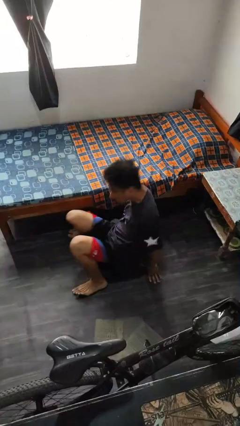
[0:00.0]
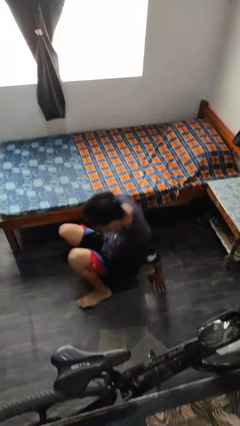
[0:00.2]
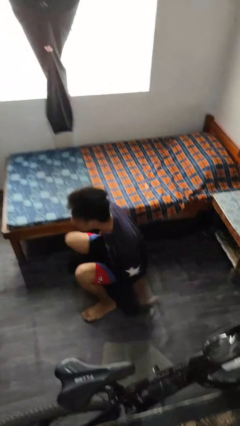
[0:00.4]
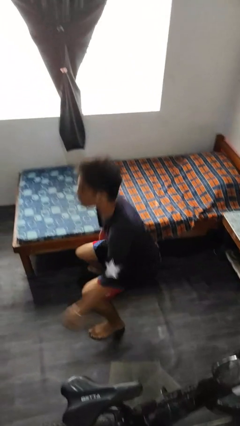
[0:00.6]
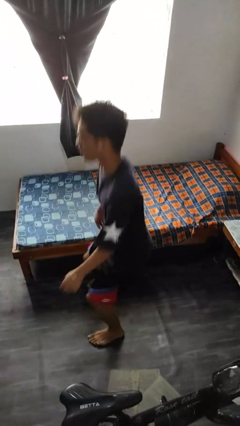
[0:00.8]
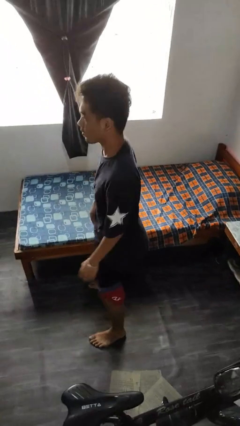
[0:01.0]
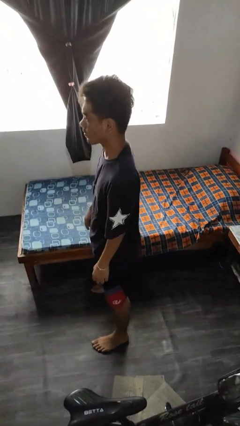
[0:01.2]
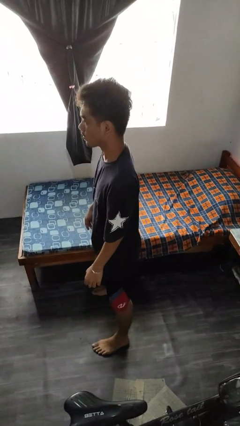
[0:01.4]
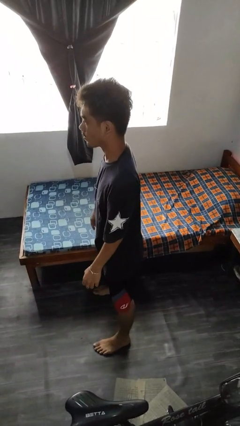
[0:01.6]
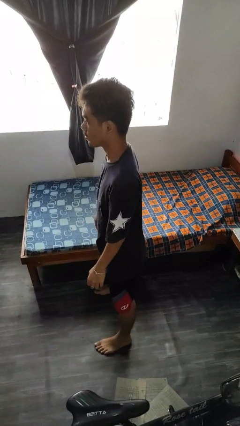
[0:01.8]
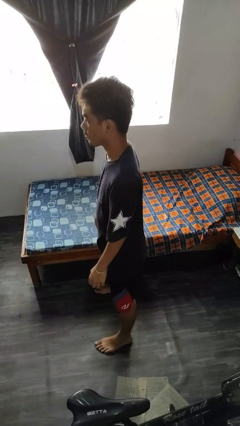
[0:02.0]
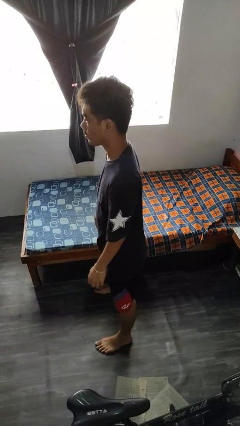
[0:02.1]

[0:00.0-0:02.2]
person stands up from floor

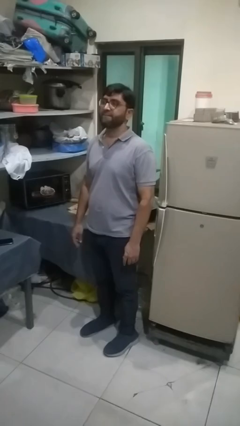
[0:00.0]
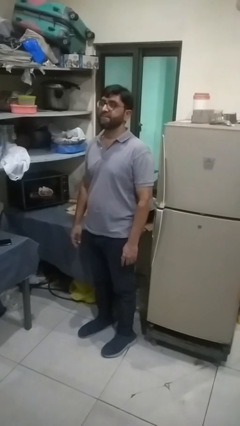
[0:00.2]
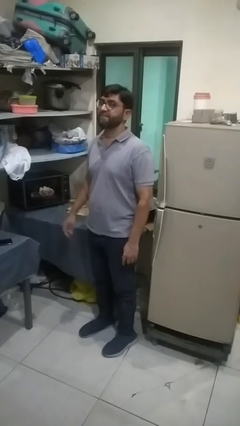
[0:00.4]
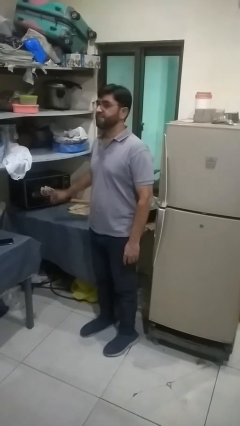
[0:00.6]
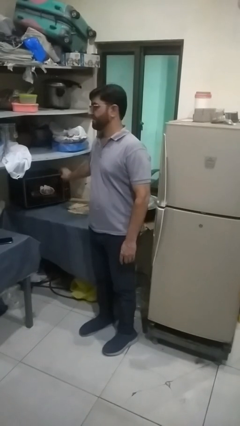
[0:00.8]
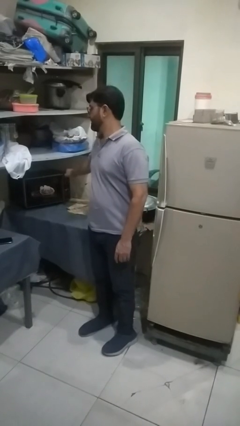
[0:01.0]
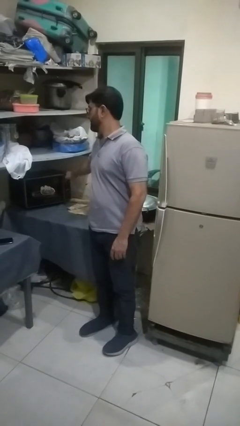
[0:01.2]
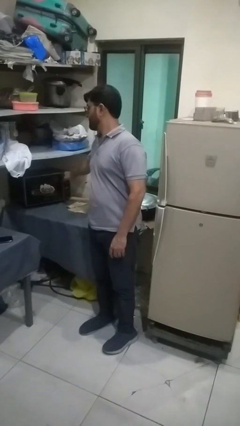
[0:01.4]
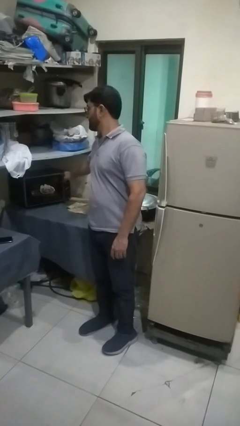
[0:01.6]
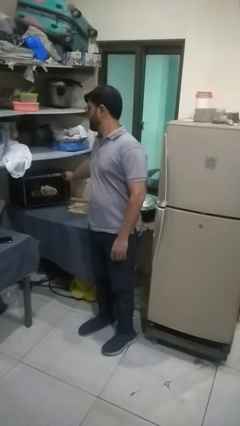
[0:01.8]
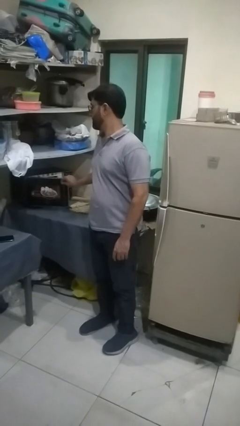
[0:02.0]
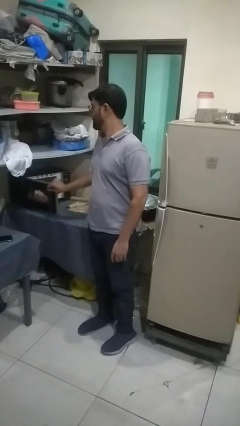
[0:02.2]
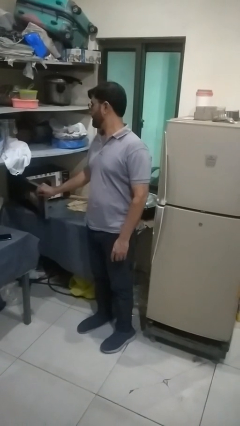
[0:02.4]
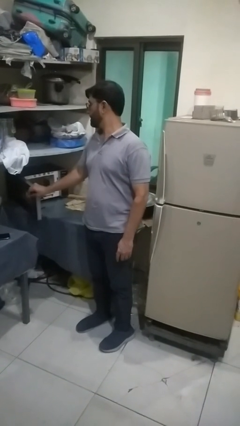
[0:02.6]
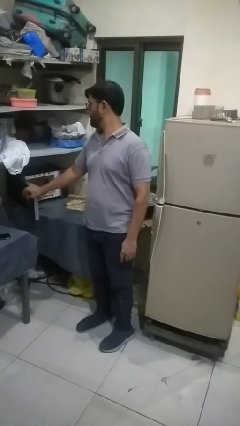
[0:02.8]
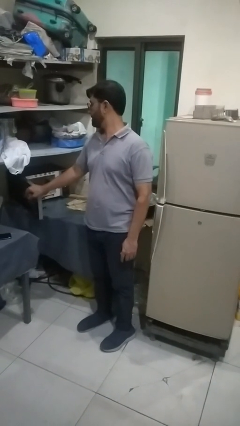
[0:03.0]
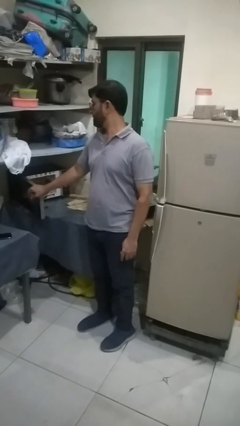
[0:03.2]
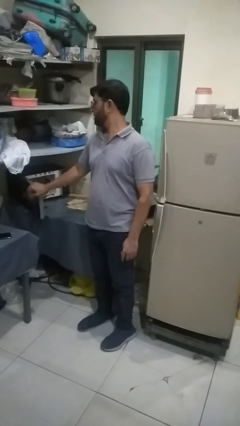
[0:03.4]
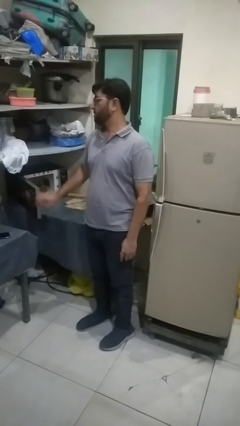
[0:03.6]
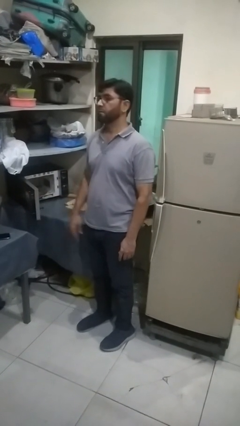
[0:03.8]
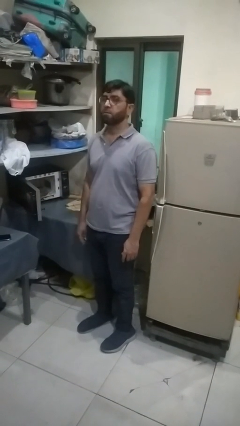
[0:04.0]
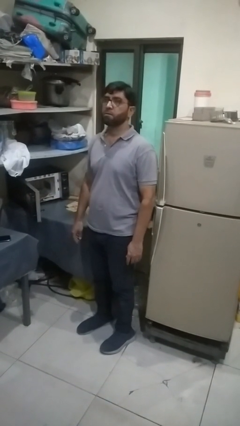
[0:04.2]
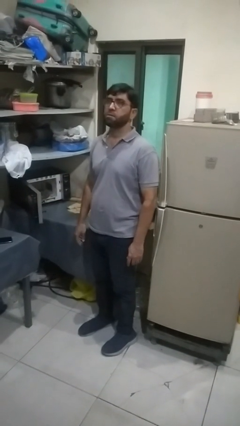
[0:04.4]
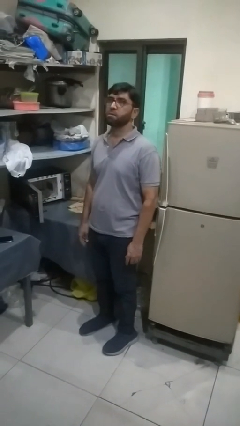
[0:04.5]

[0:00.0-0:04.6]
person opens oven door

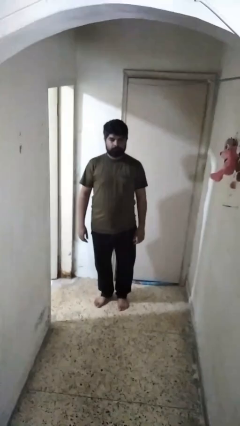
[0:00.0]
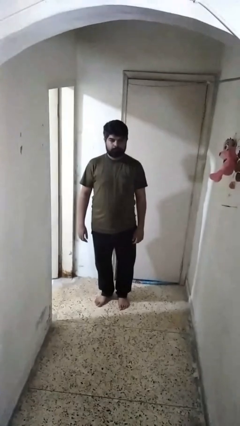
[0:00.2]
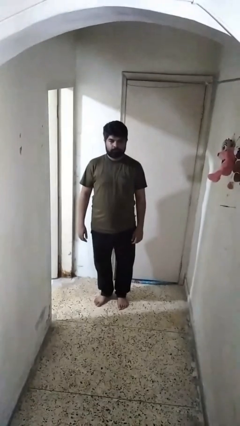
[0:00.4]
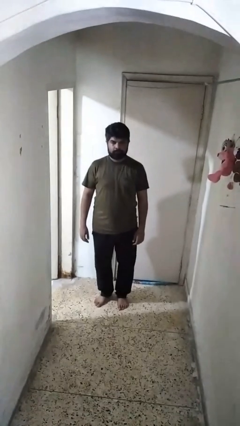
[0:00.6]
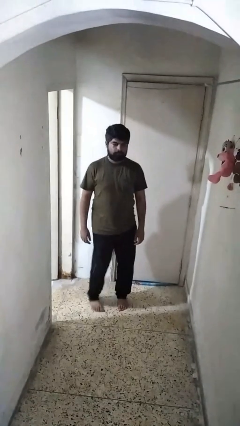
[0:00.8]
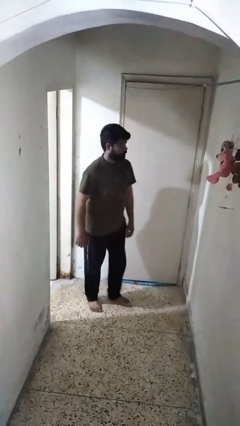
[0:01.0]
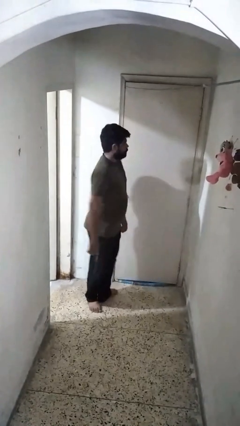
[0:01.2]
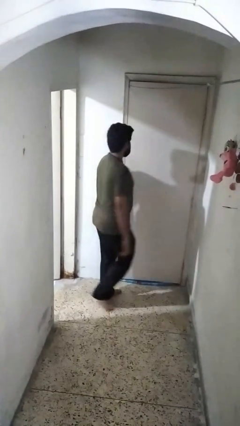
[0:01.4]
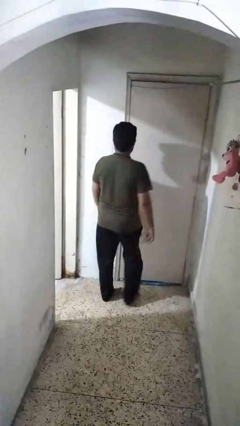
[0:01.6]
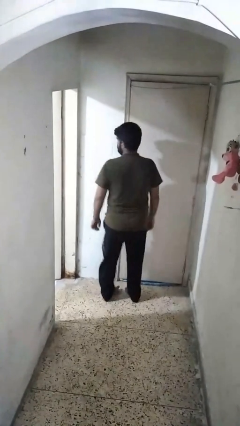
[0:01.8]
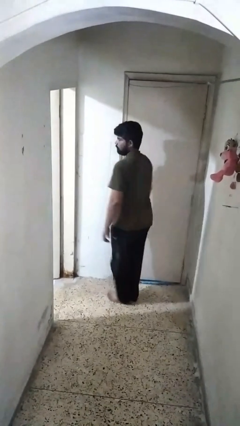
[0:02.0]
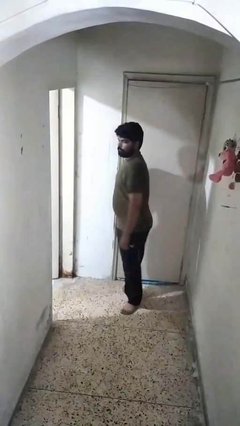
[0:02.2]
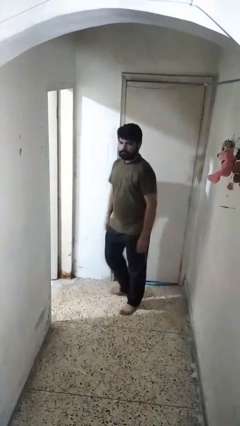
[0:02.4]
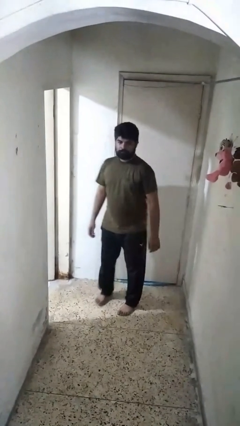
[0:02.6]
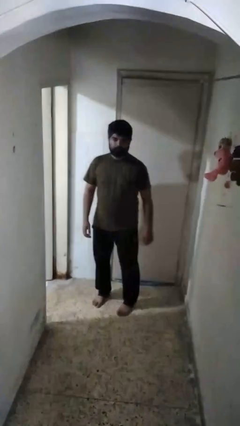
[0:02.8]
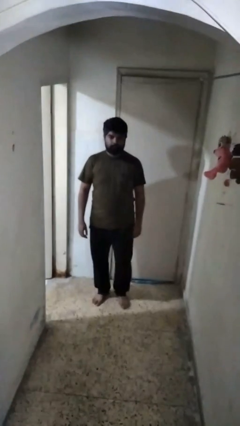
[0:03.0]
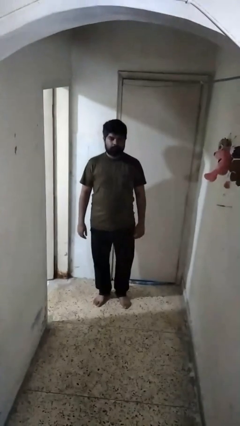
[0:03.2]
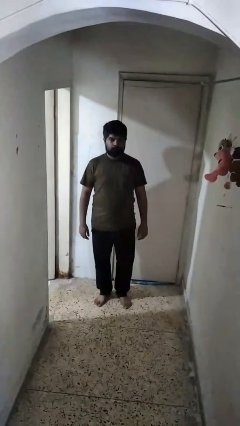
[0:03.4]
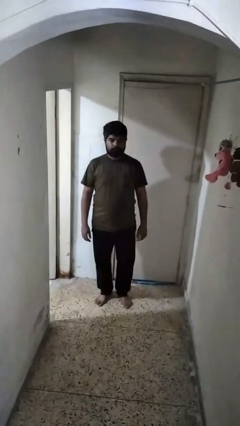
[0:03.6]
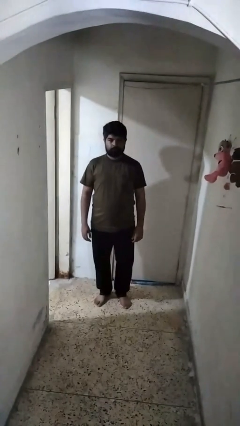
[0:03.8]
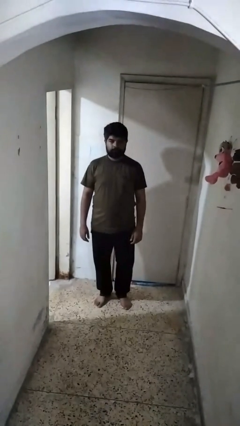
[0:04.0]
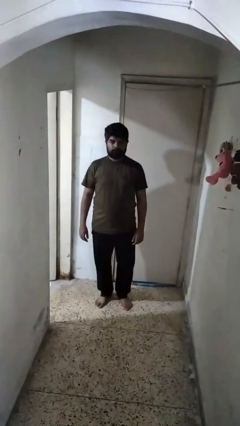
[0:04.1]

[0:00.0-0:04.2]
person twirls

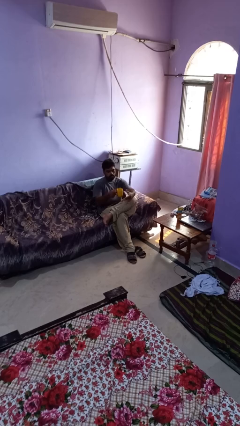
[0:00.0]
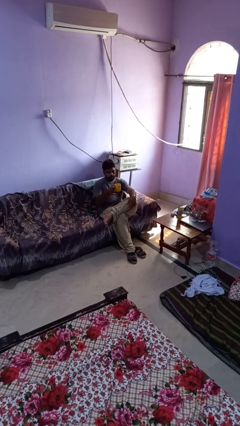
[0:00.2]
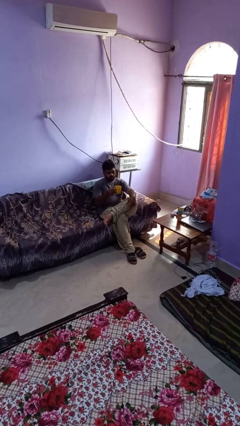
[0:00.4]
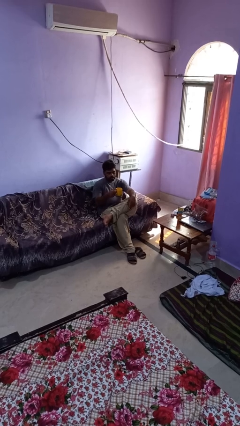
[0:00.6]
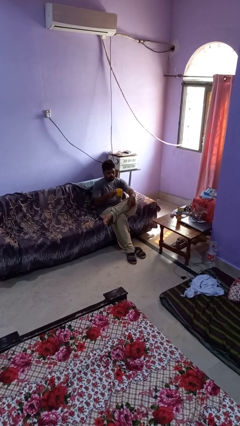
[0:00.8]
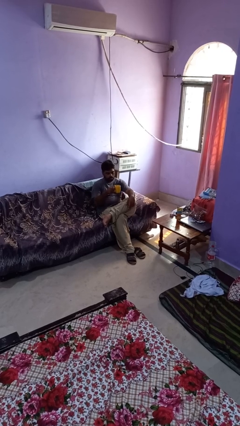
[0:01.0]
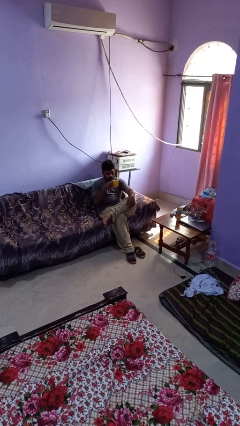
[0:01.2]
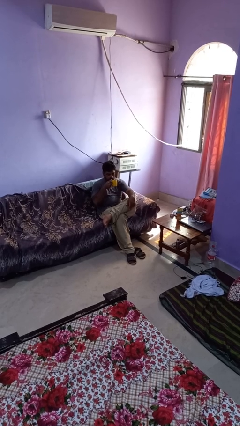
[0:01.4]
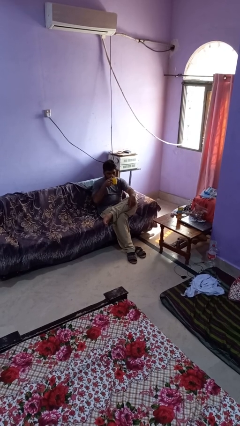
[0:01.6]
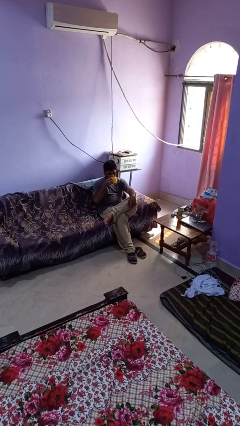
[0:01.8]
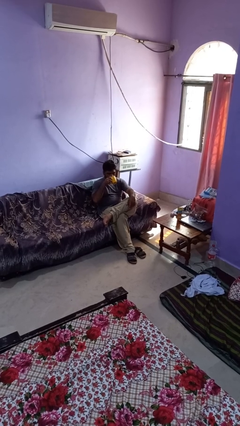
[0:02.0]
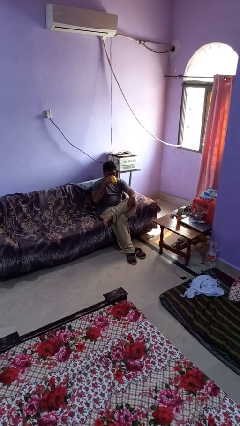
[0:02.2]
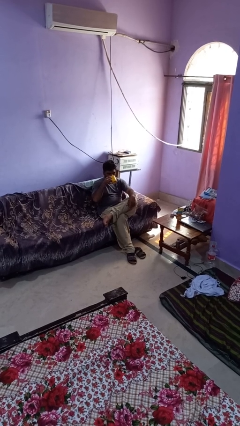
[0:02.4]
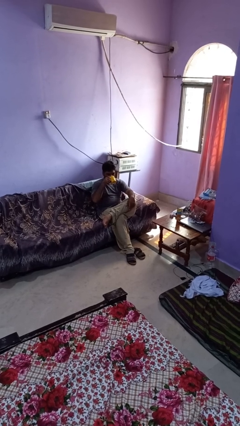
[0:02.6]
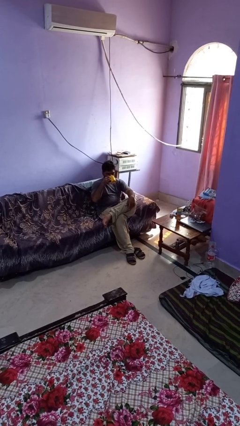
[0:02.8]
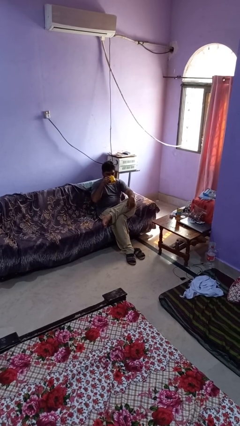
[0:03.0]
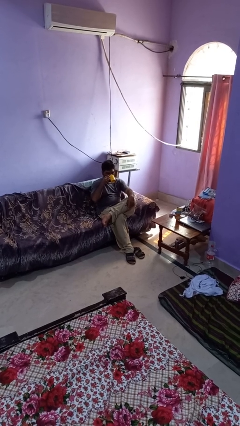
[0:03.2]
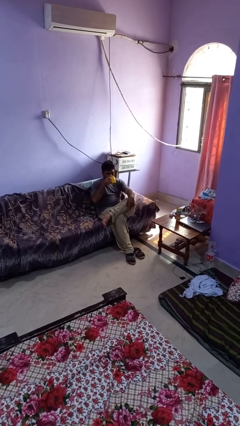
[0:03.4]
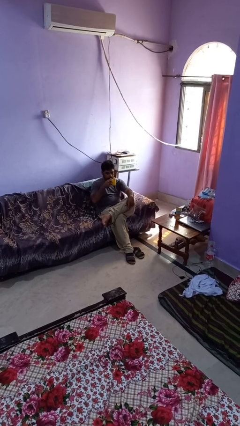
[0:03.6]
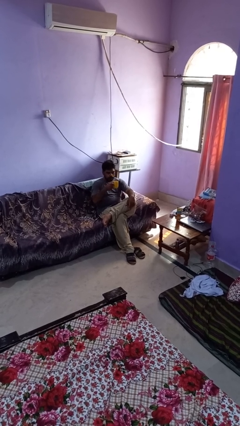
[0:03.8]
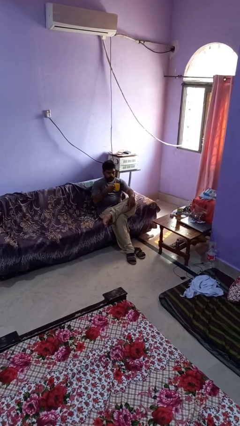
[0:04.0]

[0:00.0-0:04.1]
person drinks from mug

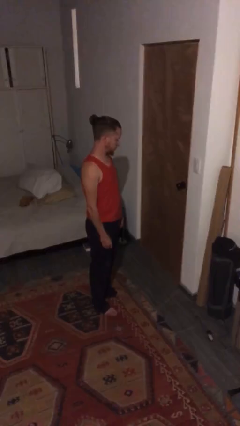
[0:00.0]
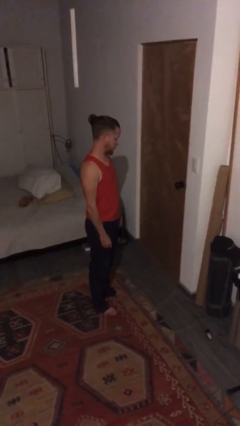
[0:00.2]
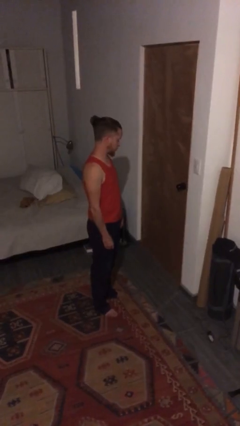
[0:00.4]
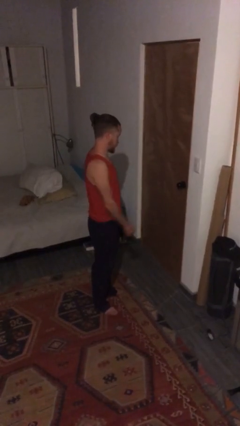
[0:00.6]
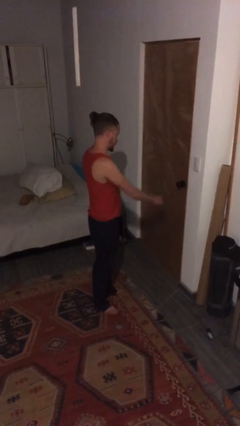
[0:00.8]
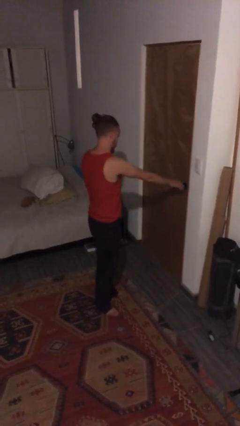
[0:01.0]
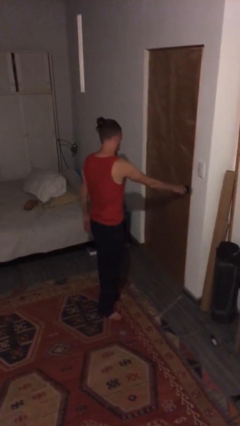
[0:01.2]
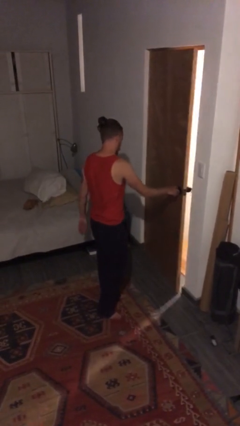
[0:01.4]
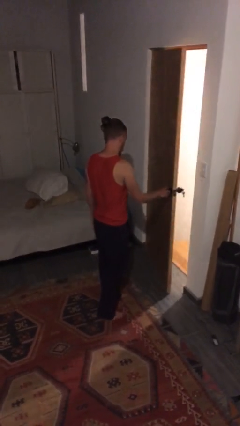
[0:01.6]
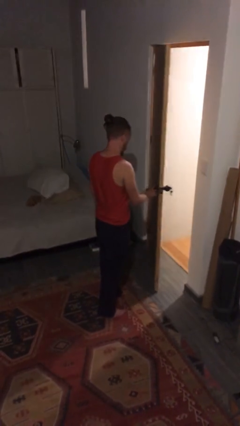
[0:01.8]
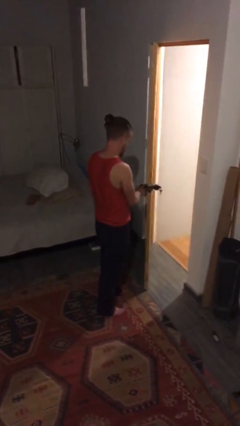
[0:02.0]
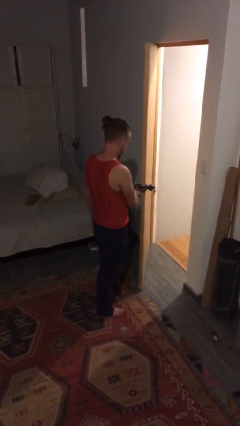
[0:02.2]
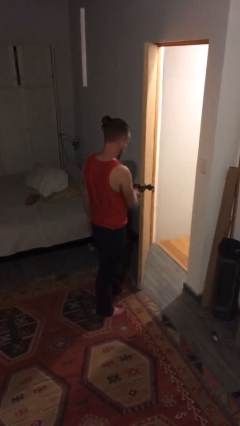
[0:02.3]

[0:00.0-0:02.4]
person opens facility door
